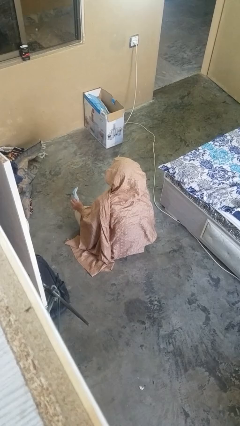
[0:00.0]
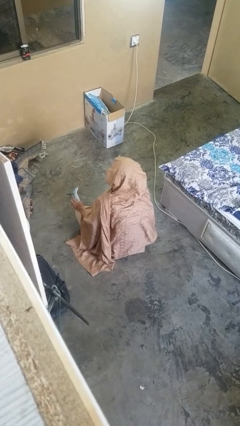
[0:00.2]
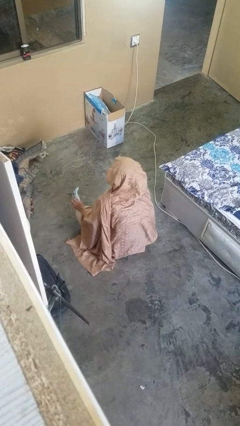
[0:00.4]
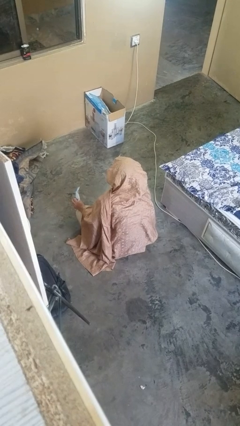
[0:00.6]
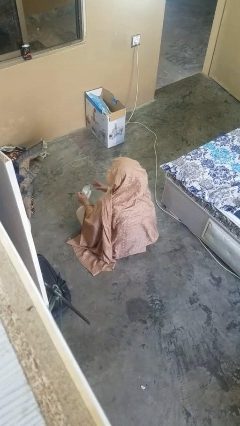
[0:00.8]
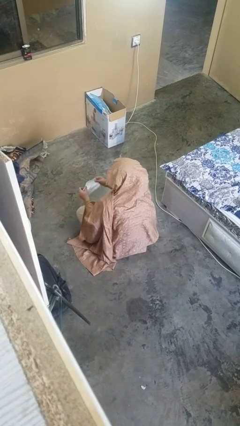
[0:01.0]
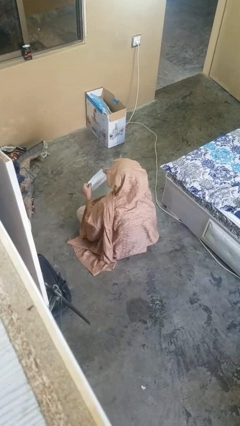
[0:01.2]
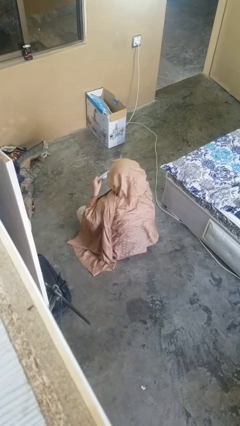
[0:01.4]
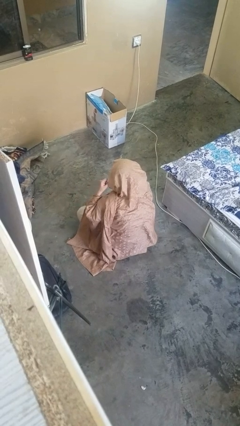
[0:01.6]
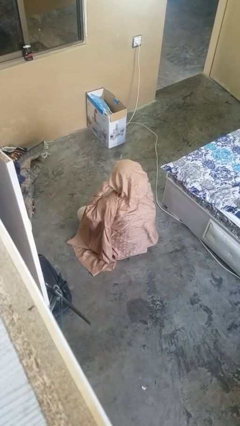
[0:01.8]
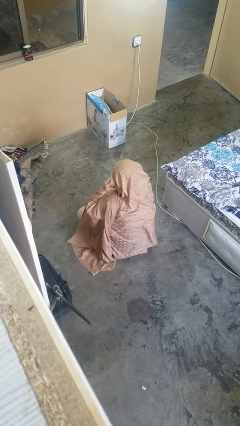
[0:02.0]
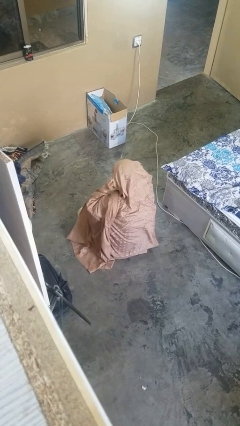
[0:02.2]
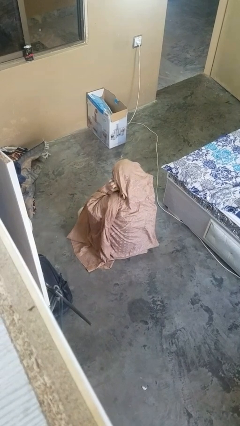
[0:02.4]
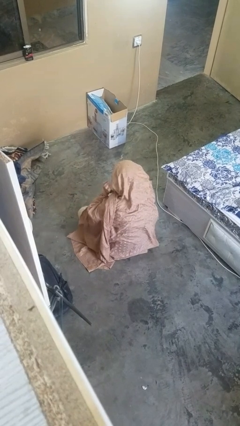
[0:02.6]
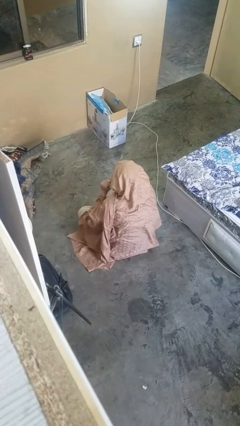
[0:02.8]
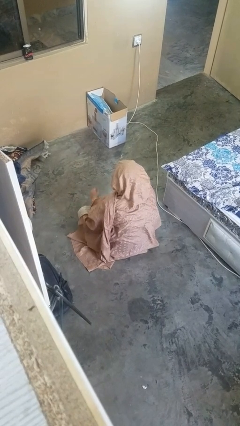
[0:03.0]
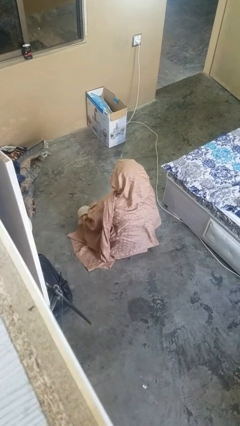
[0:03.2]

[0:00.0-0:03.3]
person puts on facemask

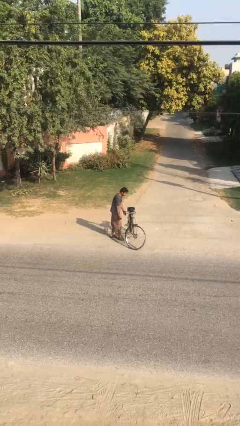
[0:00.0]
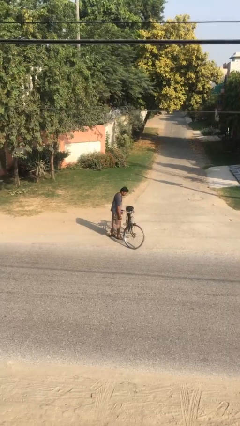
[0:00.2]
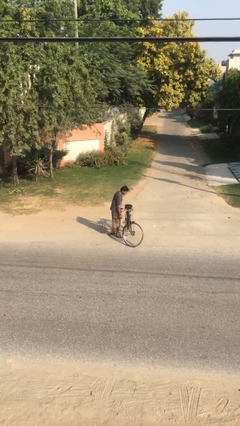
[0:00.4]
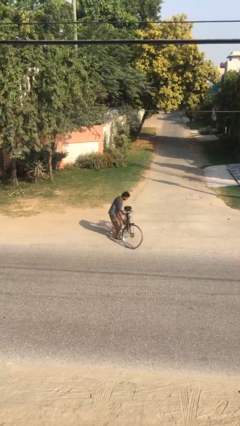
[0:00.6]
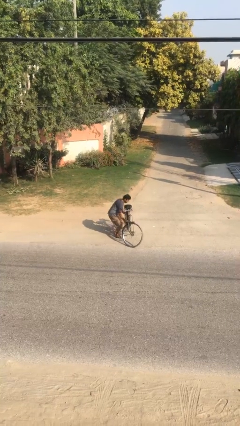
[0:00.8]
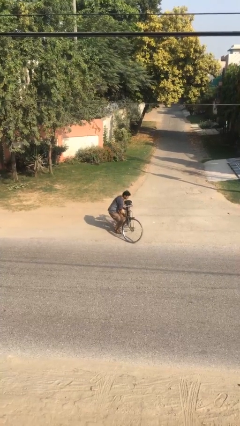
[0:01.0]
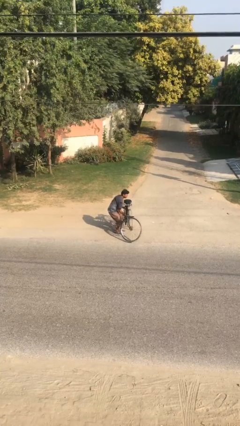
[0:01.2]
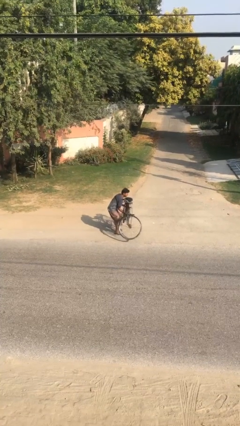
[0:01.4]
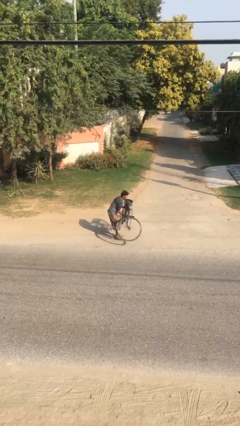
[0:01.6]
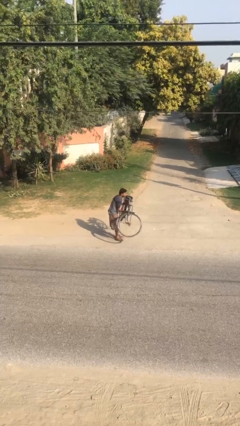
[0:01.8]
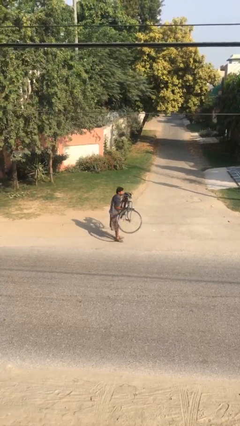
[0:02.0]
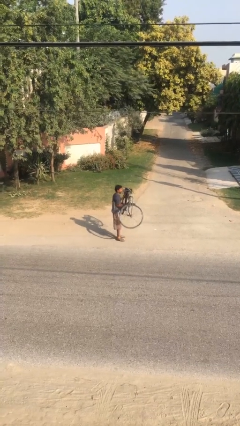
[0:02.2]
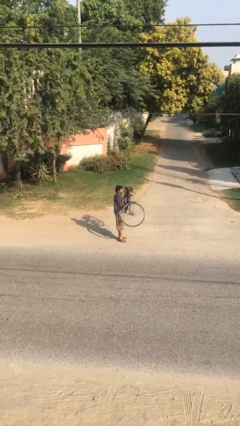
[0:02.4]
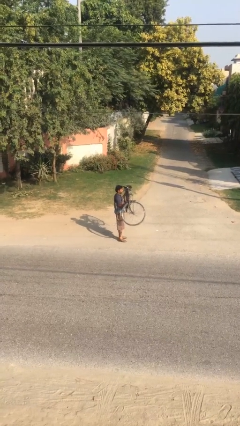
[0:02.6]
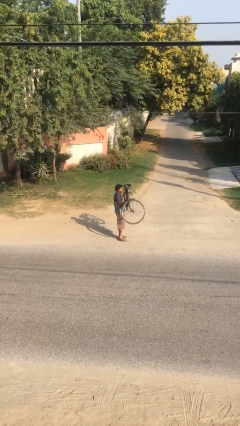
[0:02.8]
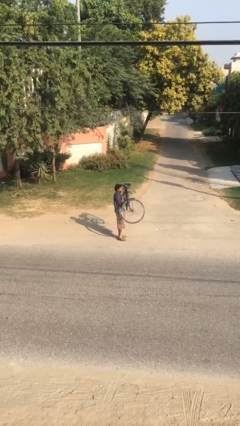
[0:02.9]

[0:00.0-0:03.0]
person picks up object from floor

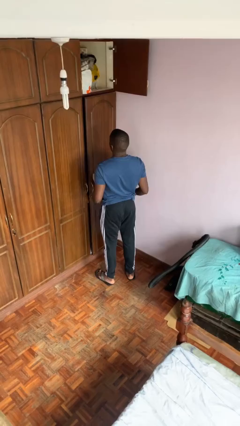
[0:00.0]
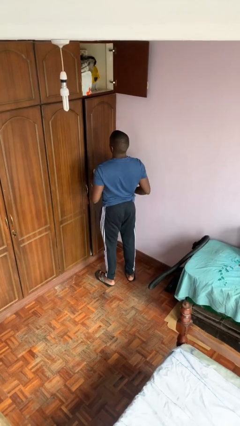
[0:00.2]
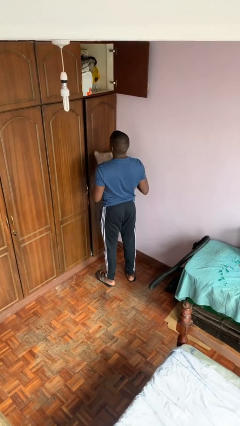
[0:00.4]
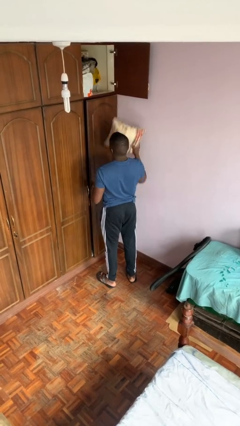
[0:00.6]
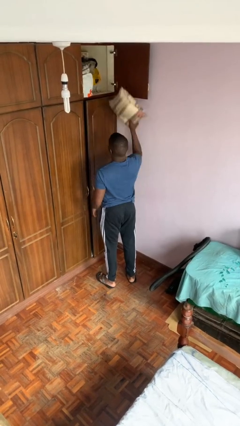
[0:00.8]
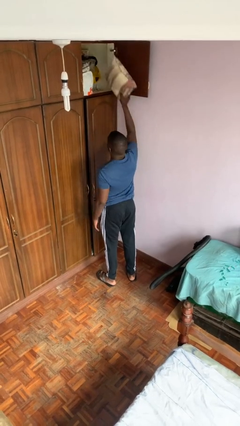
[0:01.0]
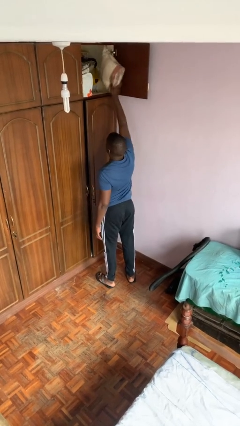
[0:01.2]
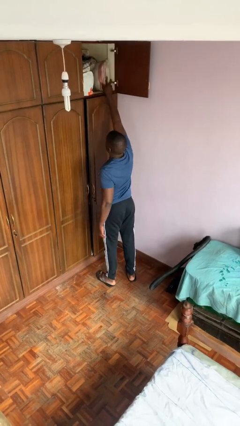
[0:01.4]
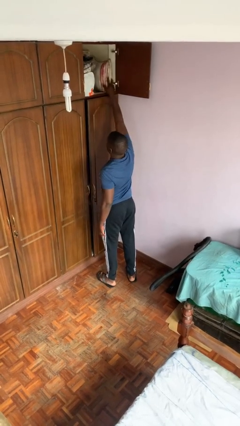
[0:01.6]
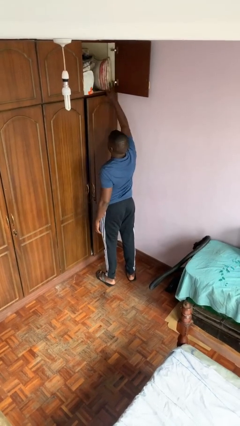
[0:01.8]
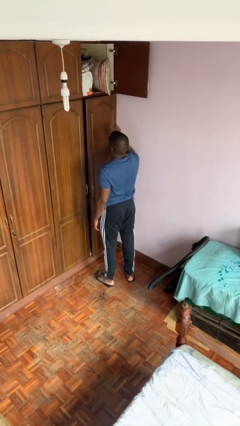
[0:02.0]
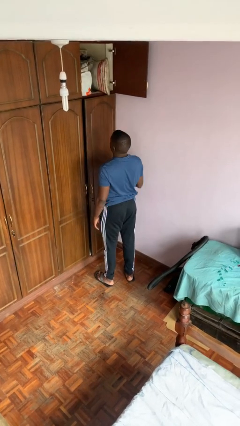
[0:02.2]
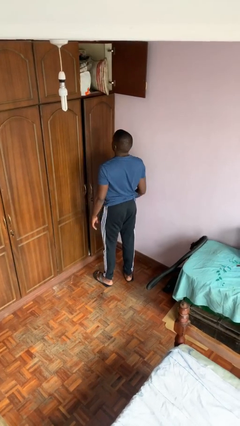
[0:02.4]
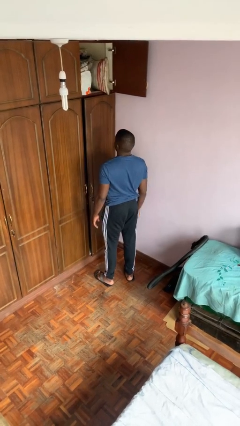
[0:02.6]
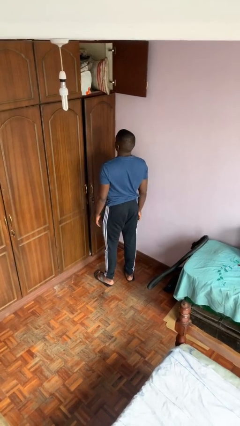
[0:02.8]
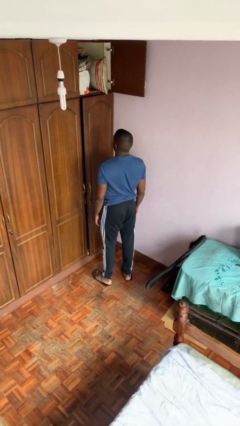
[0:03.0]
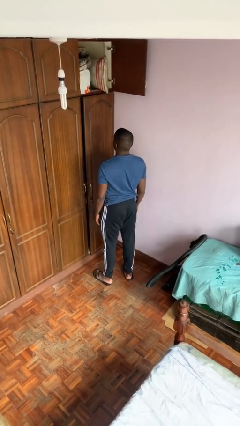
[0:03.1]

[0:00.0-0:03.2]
person puts down object on shelf

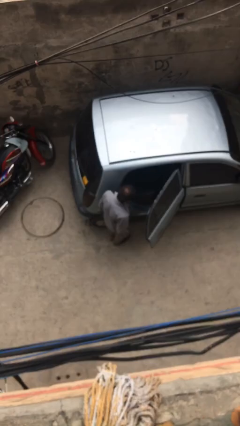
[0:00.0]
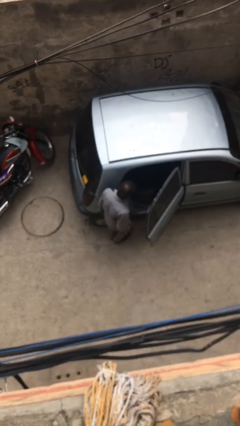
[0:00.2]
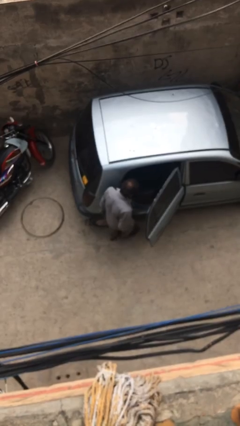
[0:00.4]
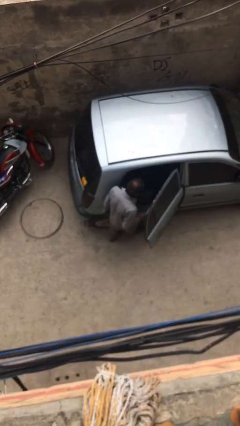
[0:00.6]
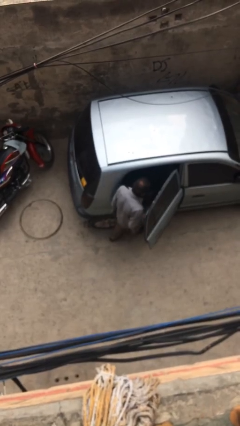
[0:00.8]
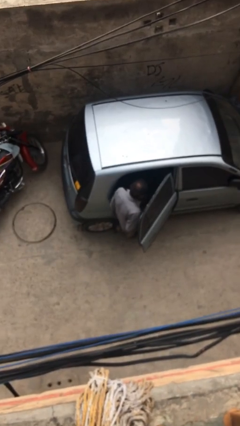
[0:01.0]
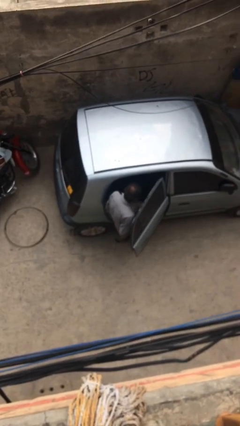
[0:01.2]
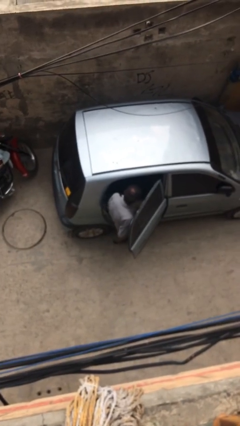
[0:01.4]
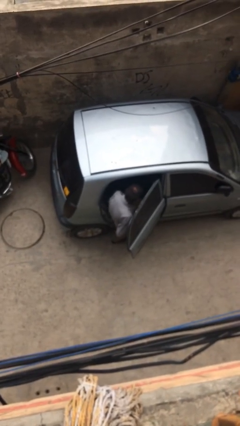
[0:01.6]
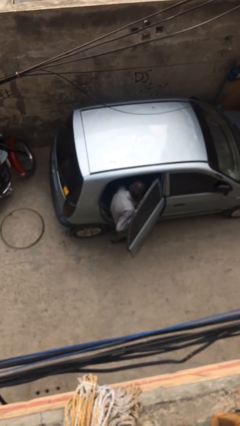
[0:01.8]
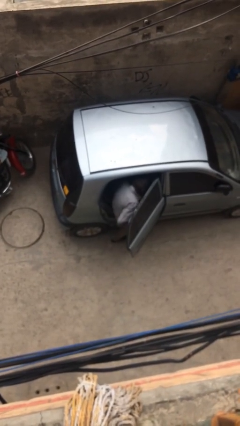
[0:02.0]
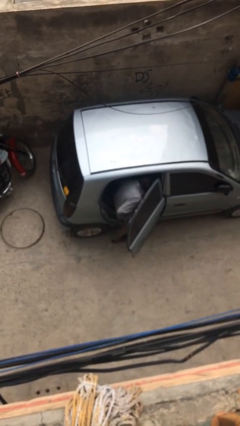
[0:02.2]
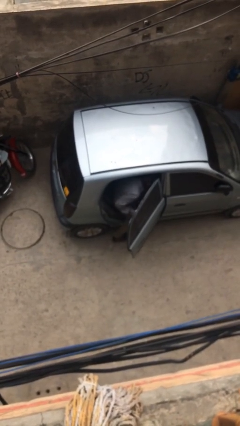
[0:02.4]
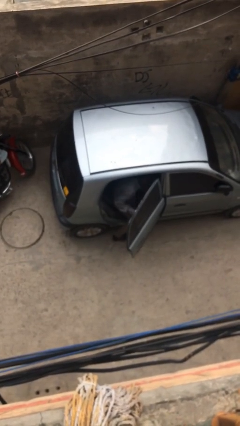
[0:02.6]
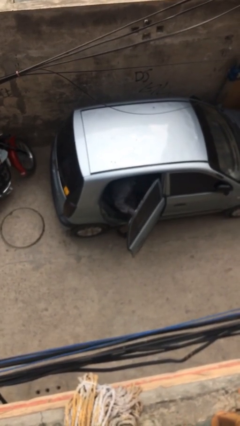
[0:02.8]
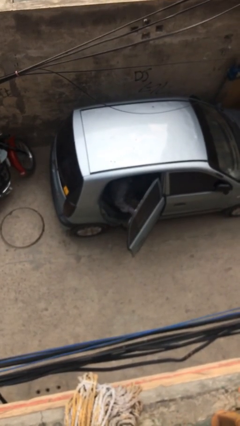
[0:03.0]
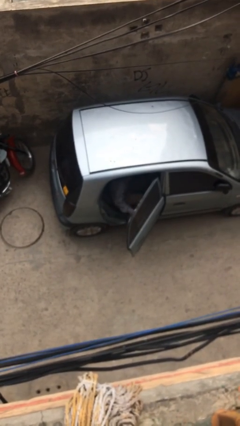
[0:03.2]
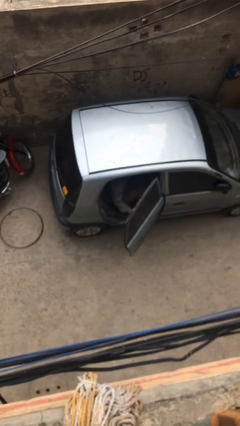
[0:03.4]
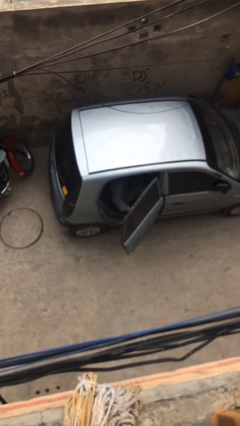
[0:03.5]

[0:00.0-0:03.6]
person enters car

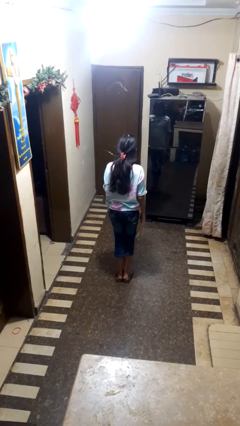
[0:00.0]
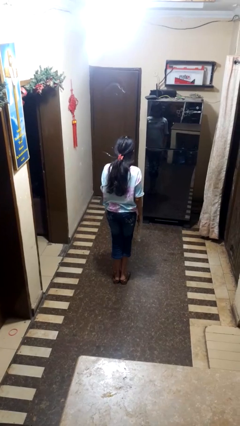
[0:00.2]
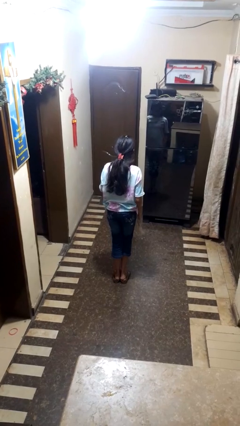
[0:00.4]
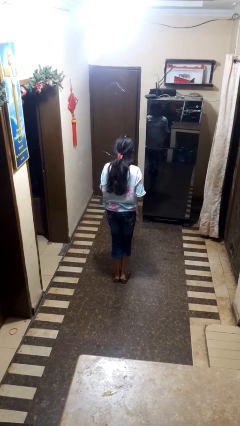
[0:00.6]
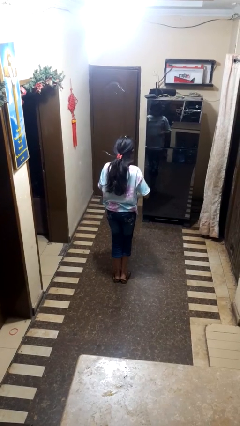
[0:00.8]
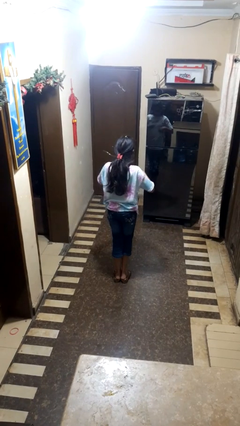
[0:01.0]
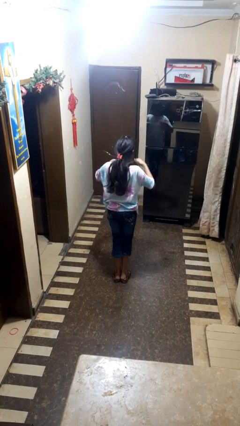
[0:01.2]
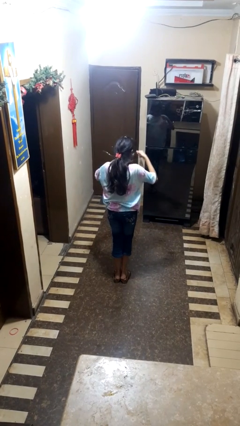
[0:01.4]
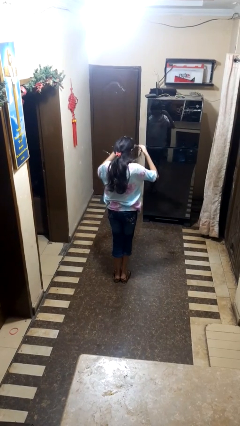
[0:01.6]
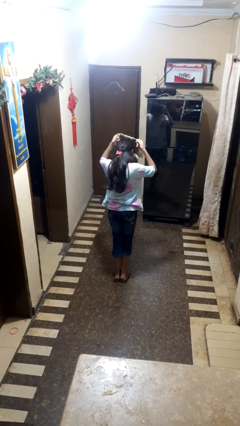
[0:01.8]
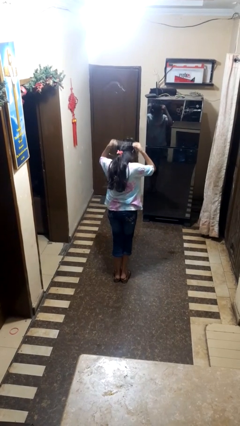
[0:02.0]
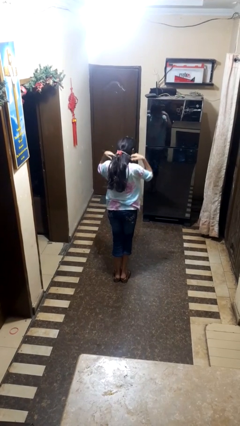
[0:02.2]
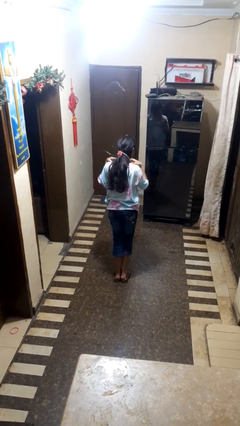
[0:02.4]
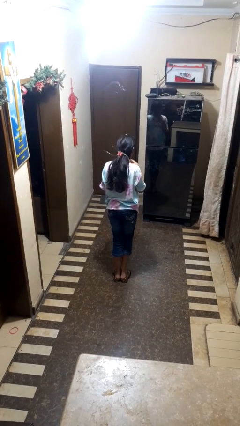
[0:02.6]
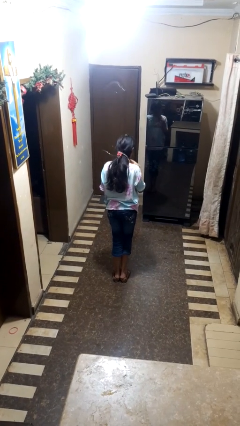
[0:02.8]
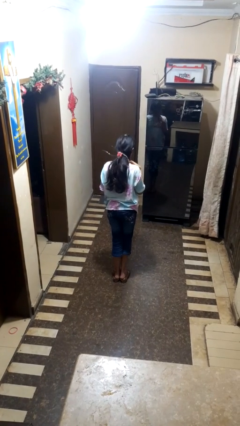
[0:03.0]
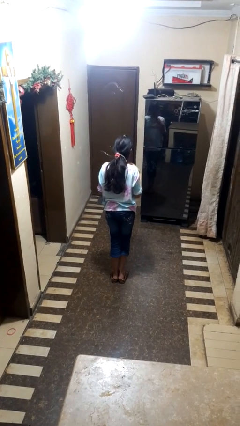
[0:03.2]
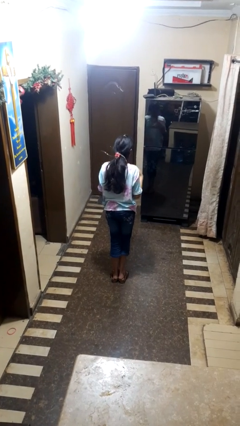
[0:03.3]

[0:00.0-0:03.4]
person puts on necklace

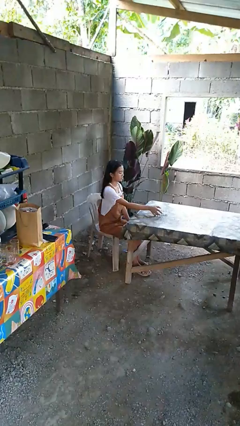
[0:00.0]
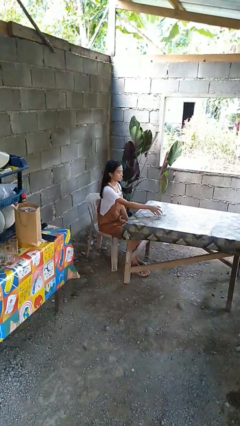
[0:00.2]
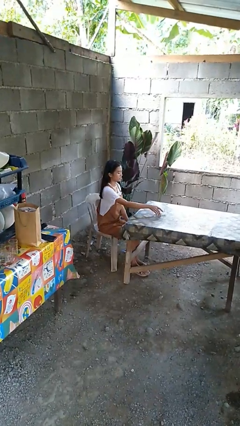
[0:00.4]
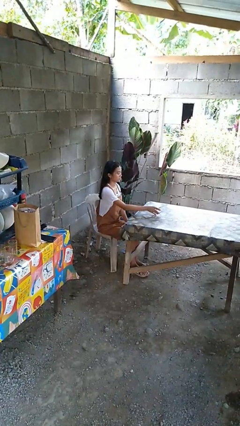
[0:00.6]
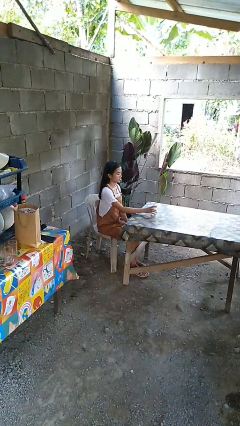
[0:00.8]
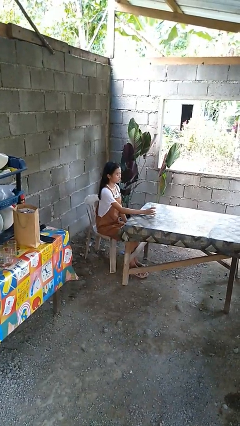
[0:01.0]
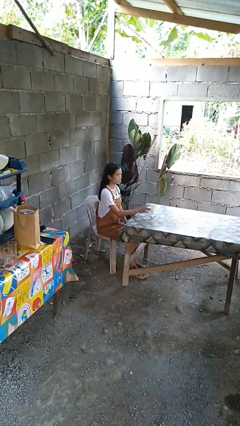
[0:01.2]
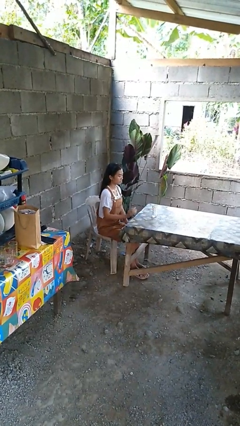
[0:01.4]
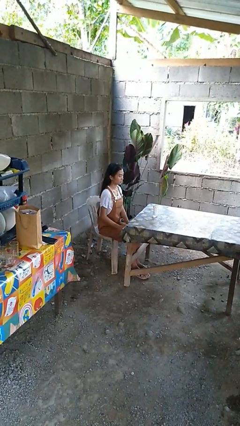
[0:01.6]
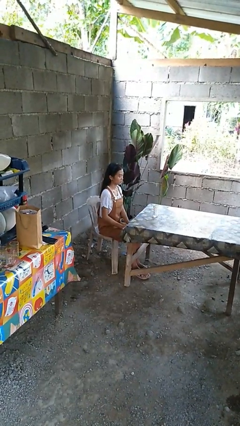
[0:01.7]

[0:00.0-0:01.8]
person sets upright glass
